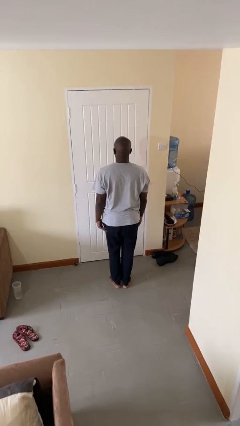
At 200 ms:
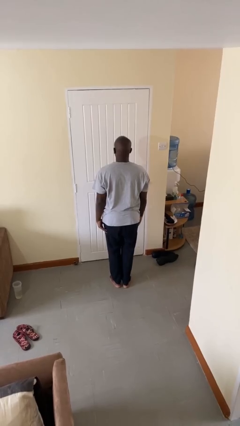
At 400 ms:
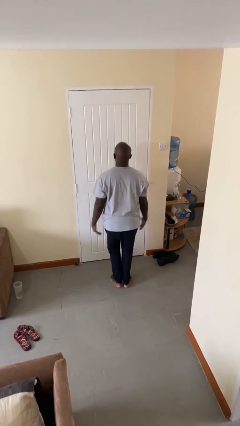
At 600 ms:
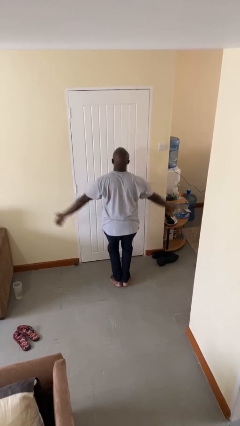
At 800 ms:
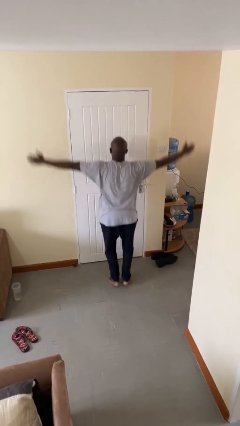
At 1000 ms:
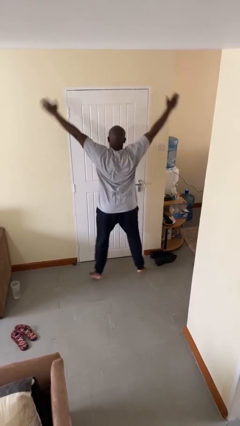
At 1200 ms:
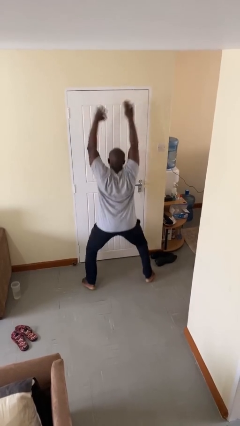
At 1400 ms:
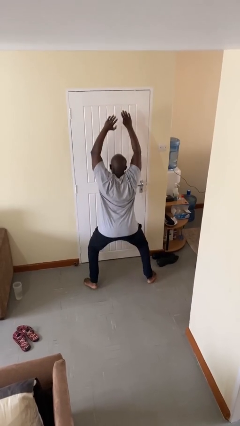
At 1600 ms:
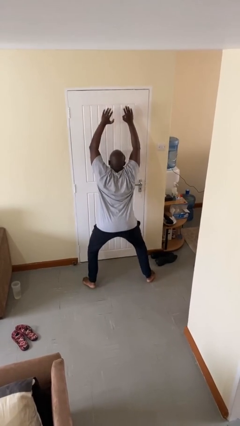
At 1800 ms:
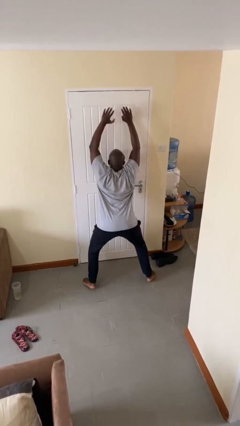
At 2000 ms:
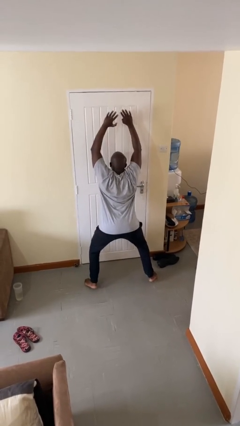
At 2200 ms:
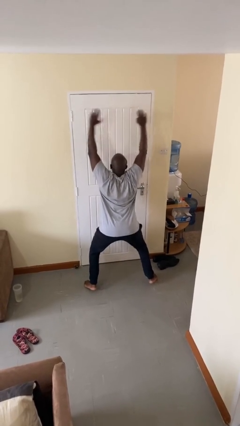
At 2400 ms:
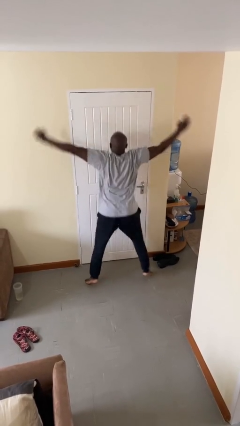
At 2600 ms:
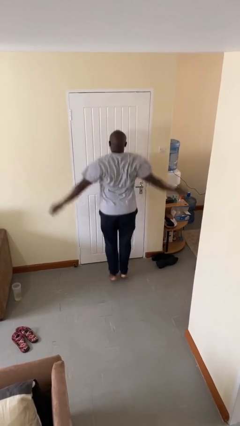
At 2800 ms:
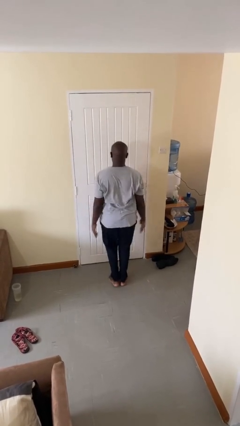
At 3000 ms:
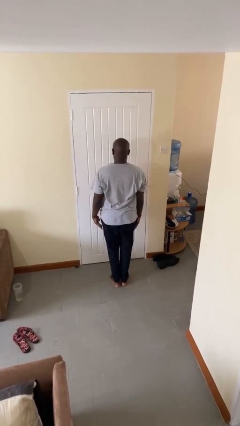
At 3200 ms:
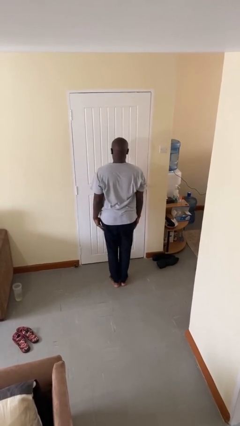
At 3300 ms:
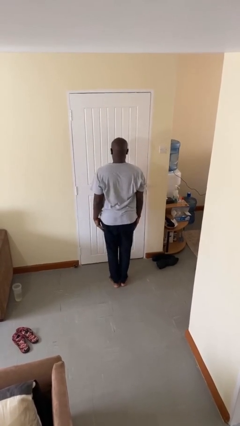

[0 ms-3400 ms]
person exercises with jumping jacks

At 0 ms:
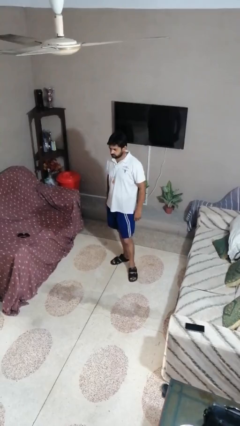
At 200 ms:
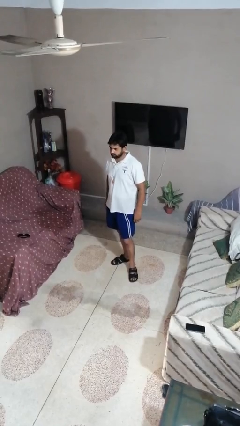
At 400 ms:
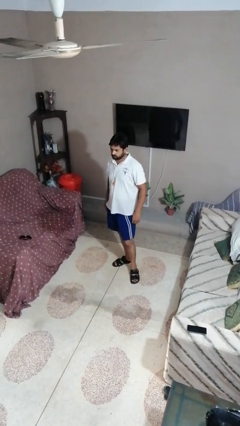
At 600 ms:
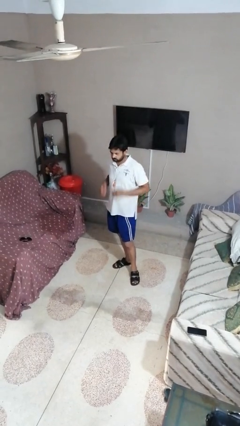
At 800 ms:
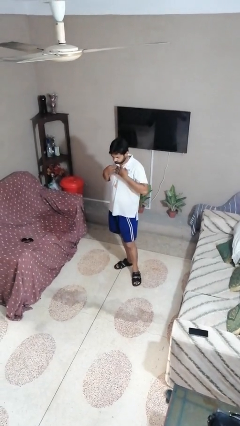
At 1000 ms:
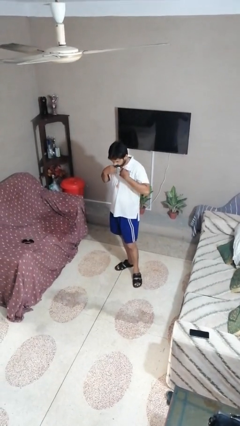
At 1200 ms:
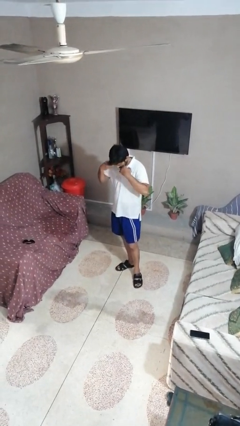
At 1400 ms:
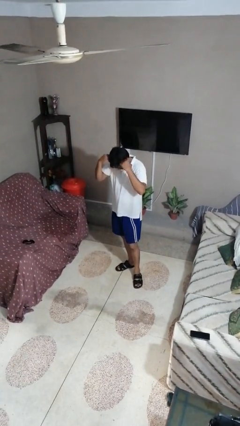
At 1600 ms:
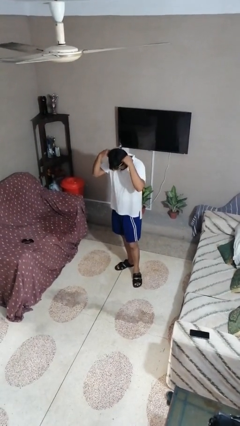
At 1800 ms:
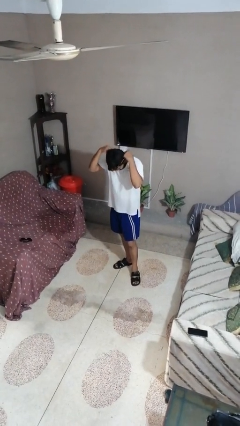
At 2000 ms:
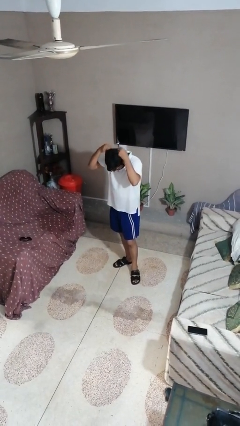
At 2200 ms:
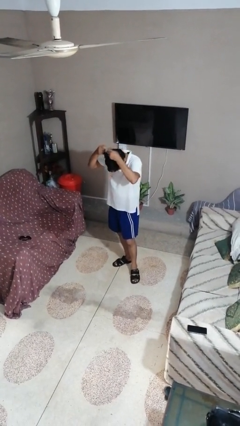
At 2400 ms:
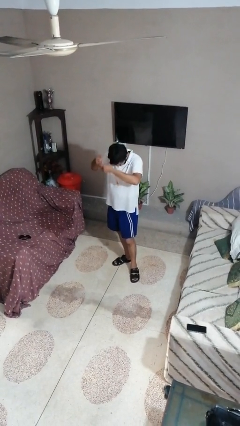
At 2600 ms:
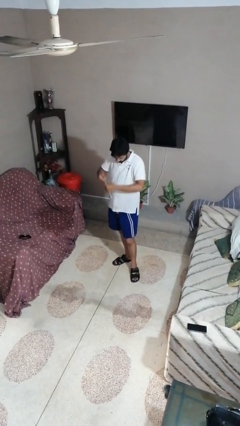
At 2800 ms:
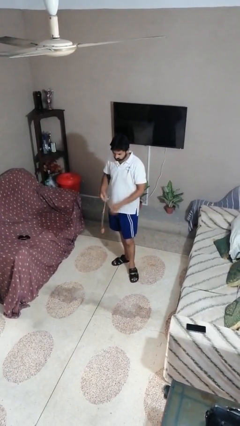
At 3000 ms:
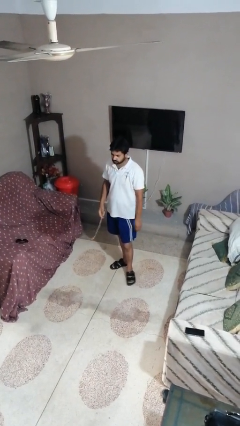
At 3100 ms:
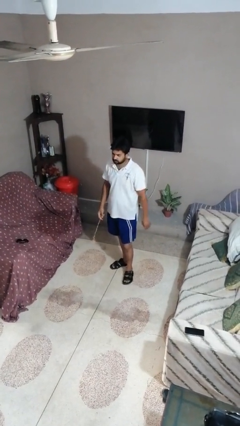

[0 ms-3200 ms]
person takes off necklace

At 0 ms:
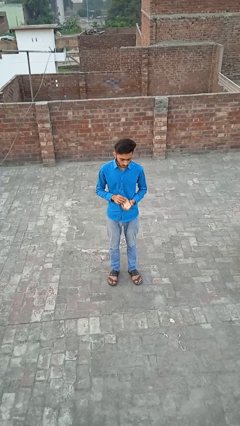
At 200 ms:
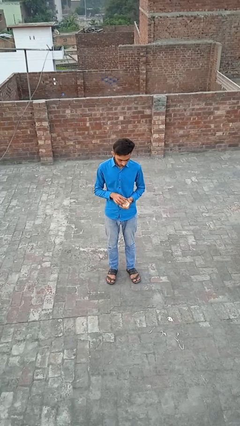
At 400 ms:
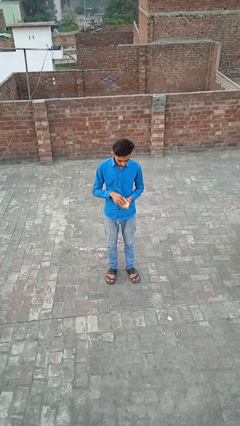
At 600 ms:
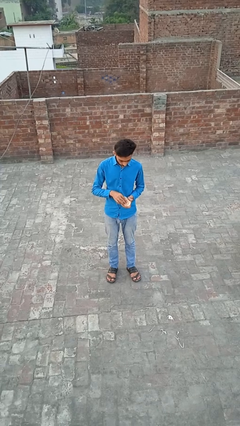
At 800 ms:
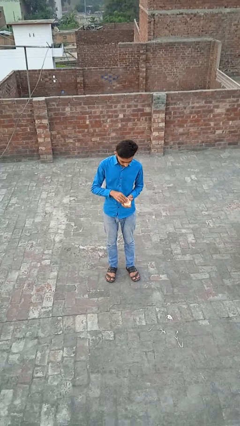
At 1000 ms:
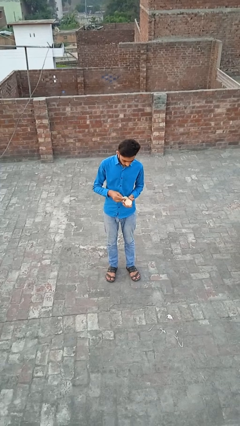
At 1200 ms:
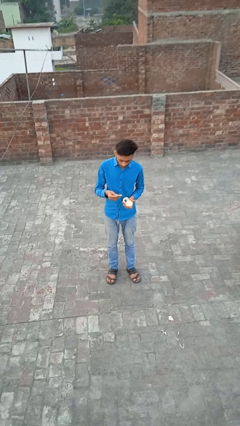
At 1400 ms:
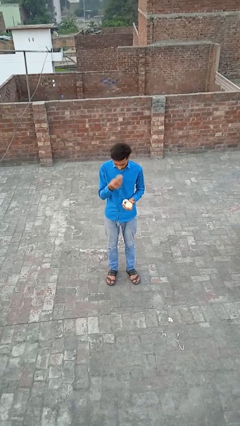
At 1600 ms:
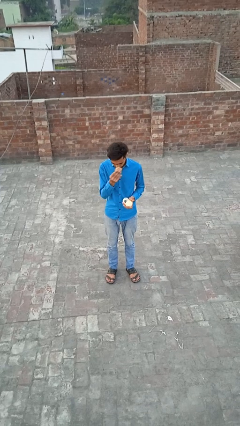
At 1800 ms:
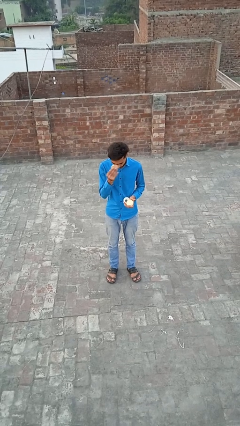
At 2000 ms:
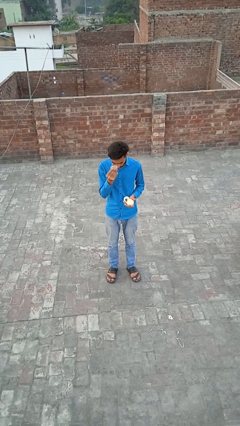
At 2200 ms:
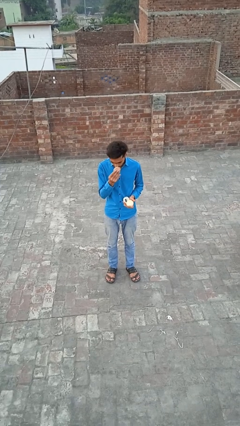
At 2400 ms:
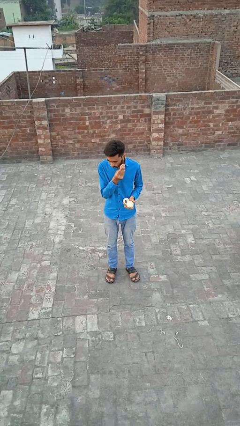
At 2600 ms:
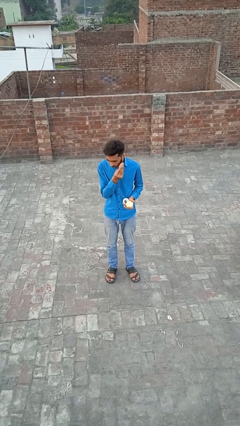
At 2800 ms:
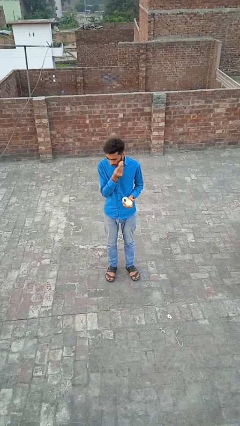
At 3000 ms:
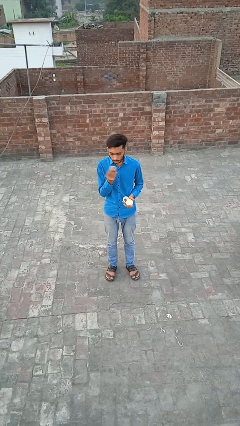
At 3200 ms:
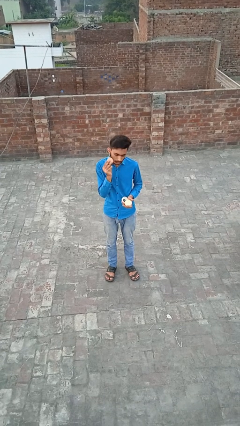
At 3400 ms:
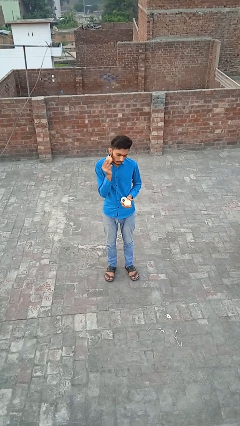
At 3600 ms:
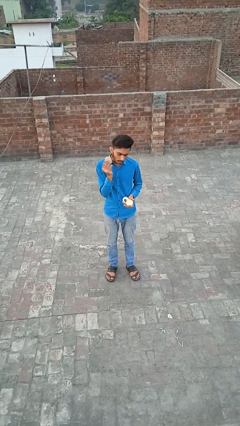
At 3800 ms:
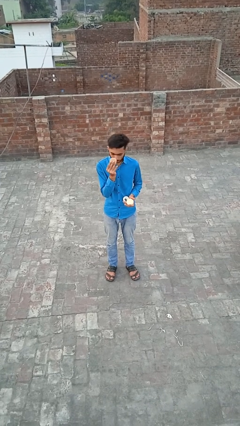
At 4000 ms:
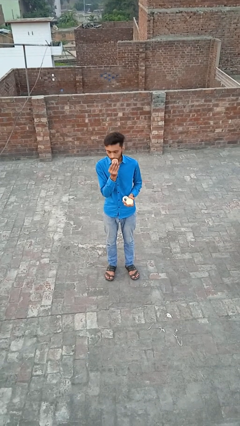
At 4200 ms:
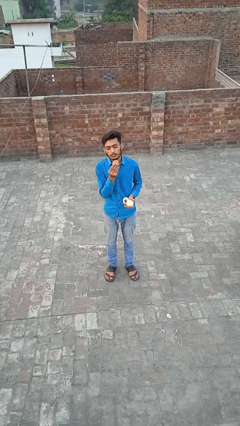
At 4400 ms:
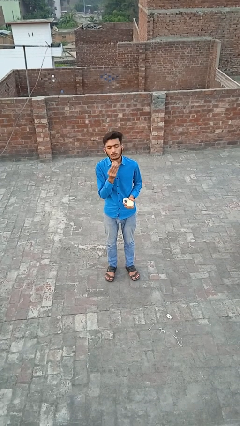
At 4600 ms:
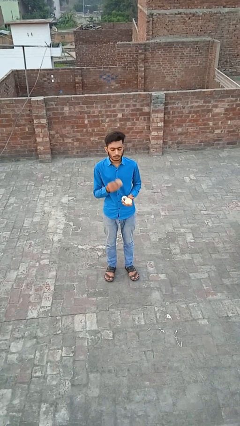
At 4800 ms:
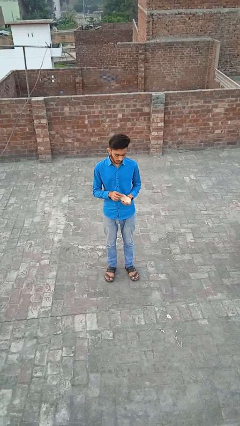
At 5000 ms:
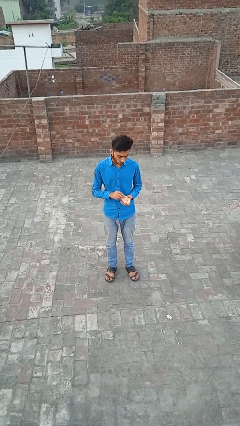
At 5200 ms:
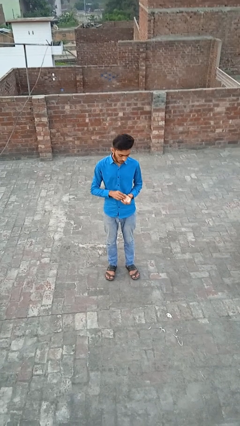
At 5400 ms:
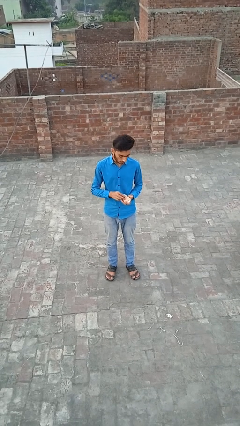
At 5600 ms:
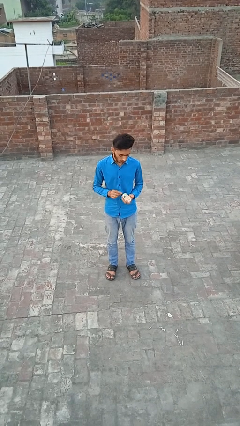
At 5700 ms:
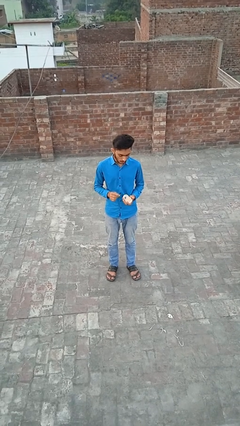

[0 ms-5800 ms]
person applies foundation makeup

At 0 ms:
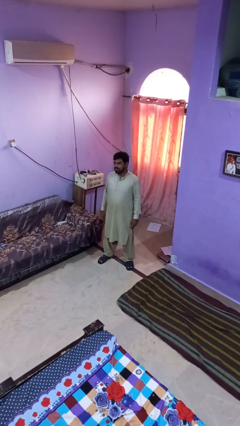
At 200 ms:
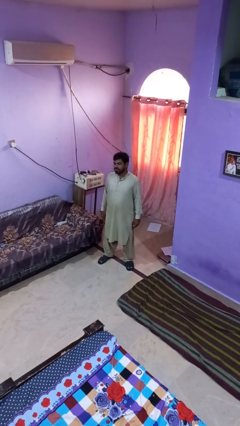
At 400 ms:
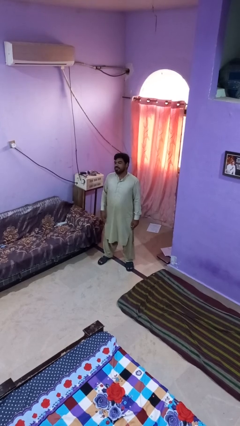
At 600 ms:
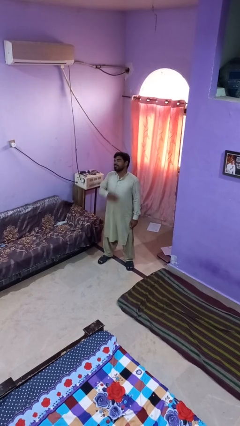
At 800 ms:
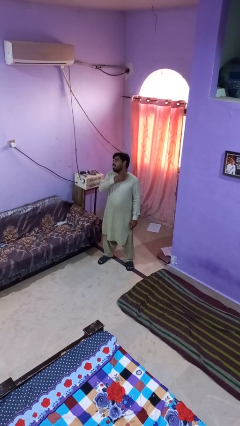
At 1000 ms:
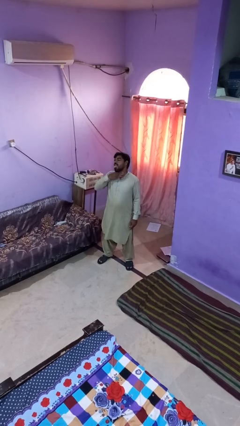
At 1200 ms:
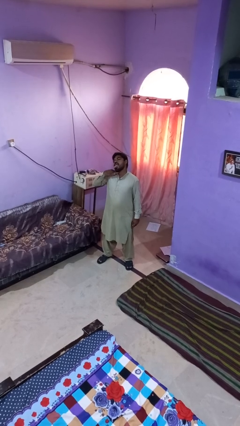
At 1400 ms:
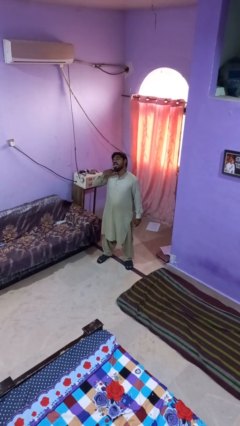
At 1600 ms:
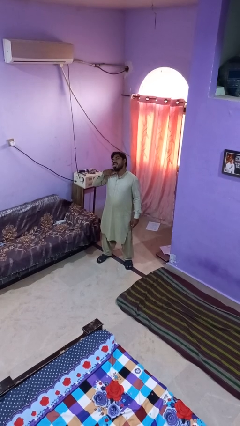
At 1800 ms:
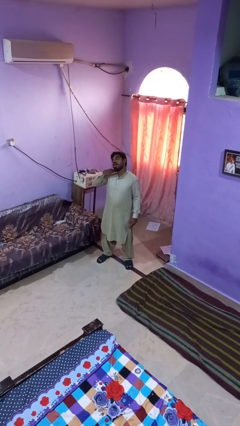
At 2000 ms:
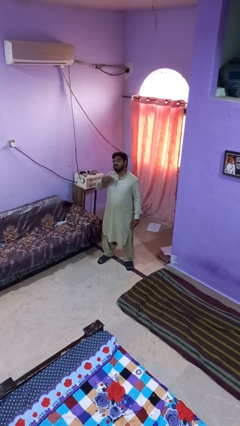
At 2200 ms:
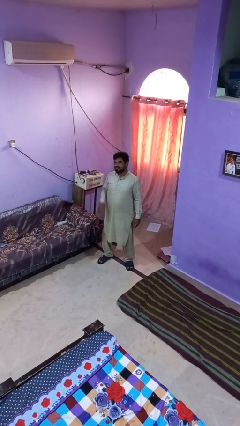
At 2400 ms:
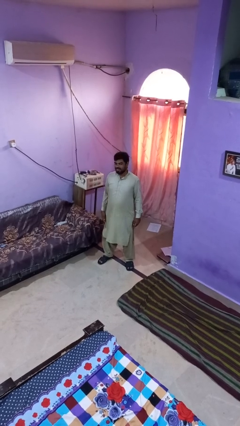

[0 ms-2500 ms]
person gestures cut

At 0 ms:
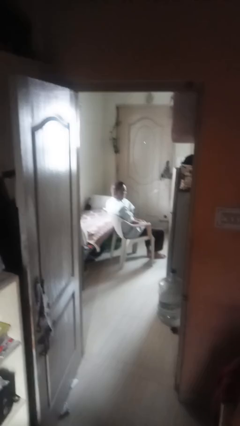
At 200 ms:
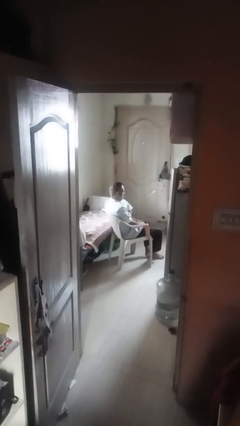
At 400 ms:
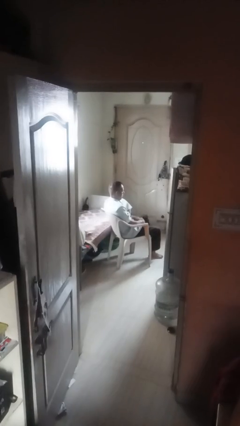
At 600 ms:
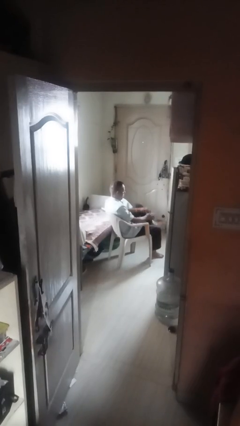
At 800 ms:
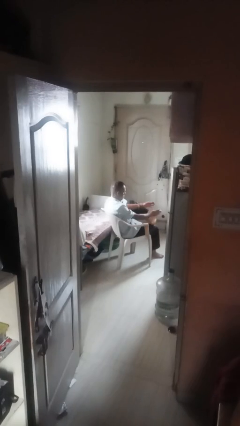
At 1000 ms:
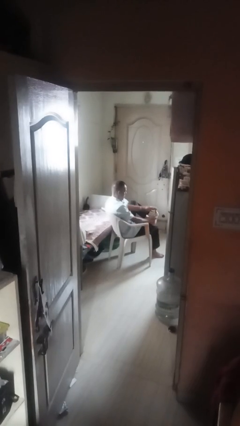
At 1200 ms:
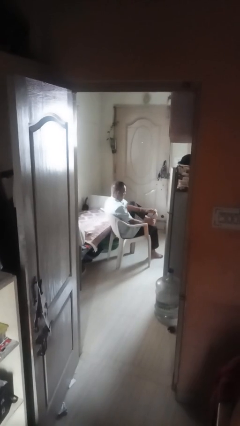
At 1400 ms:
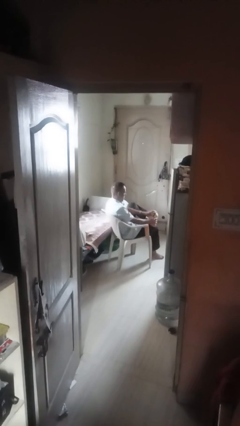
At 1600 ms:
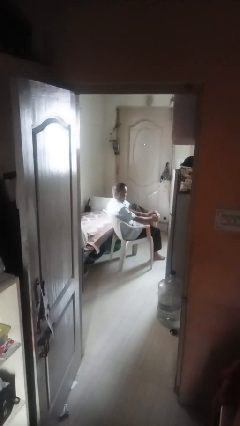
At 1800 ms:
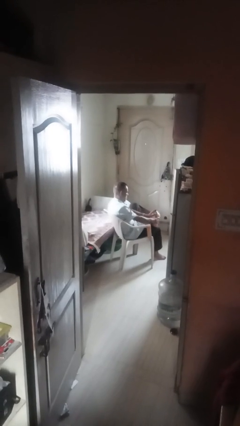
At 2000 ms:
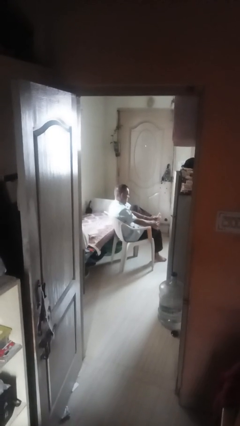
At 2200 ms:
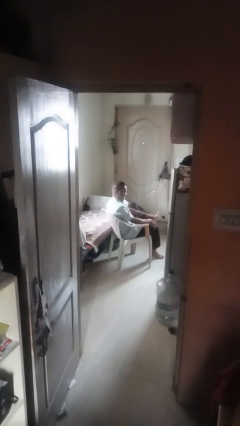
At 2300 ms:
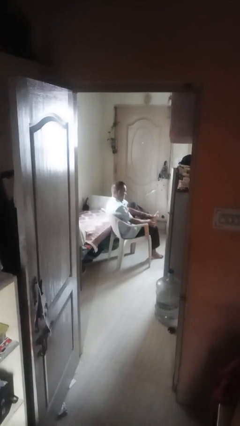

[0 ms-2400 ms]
person rubs foot
